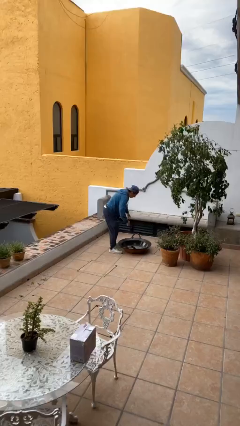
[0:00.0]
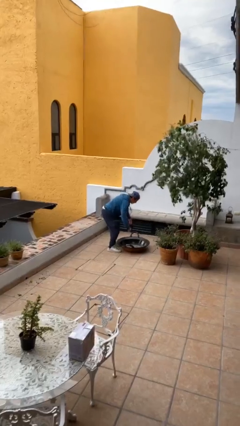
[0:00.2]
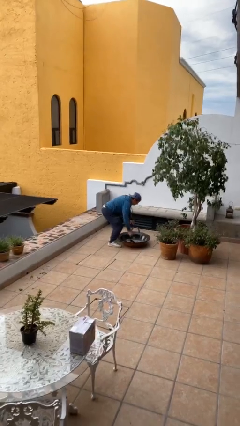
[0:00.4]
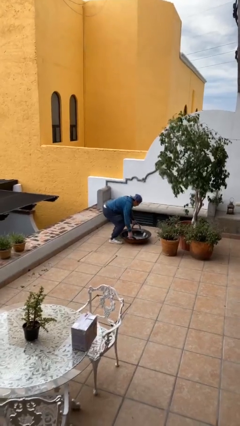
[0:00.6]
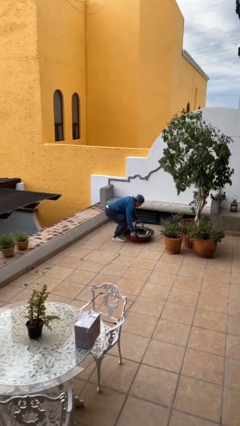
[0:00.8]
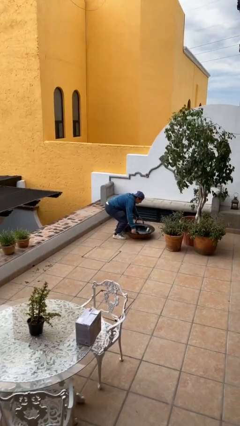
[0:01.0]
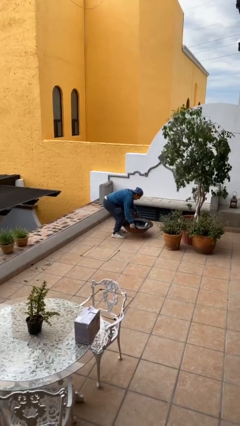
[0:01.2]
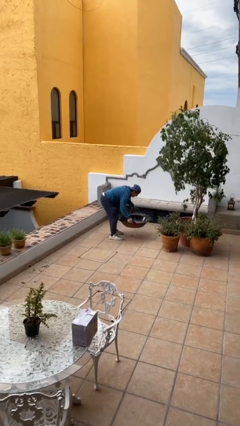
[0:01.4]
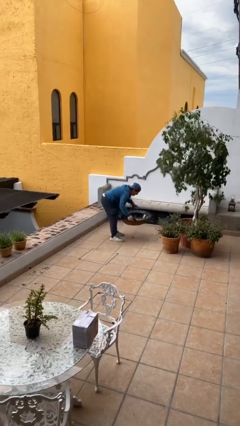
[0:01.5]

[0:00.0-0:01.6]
person picks up object from floor

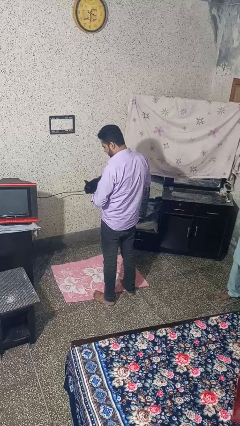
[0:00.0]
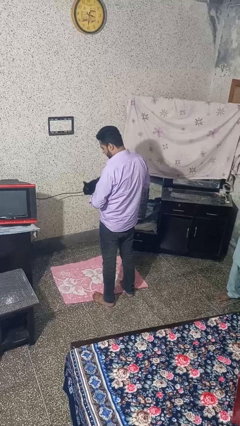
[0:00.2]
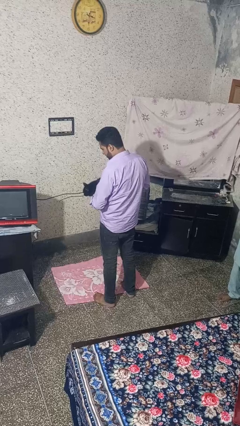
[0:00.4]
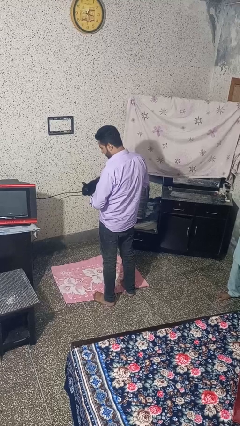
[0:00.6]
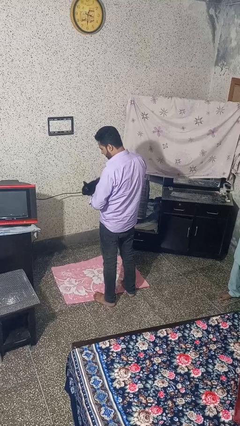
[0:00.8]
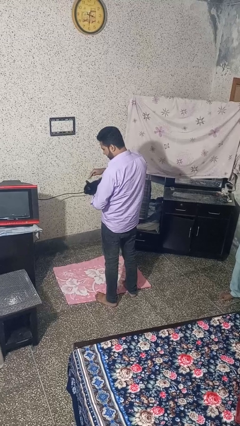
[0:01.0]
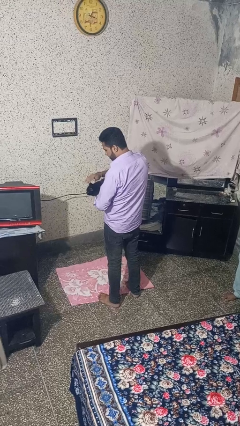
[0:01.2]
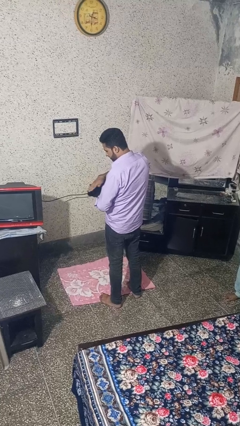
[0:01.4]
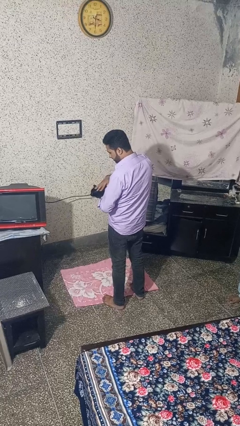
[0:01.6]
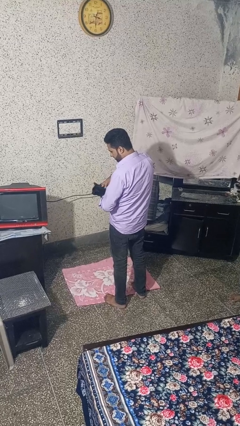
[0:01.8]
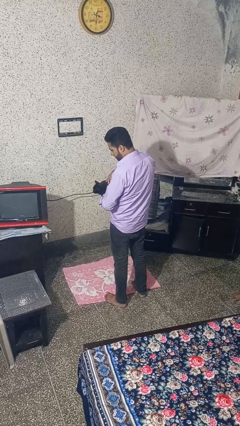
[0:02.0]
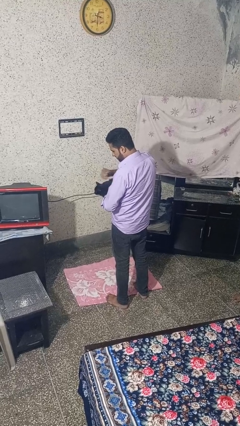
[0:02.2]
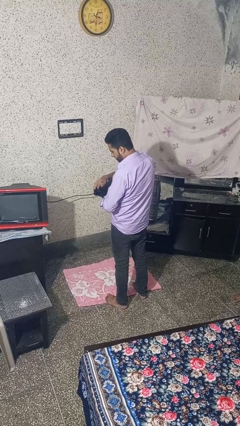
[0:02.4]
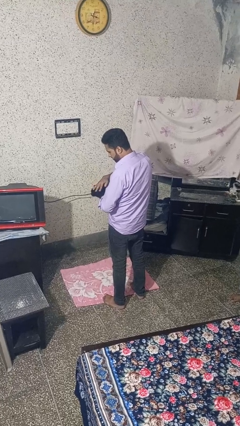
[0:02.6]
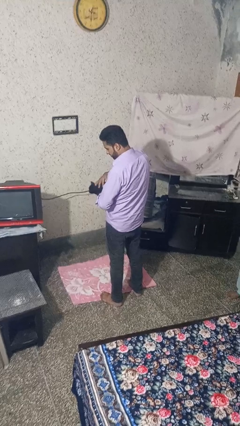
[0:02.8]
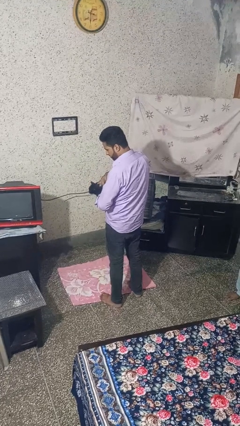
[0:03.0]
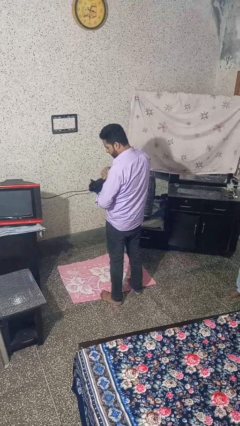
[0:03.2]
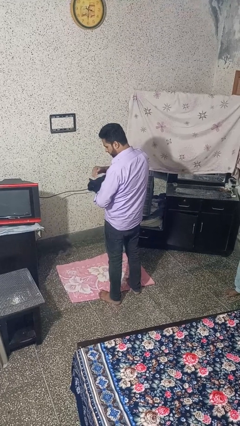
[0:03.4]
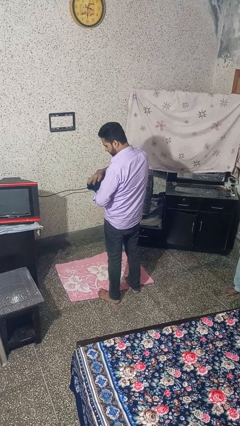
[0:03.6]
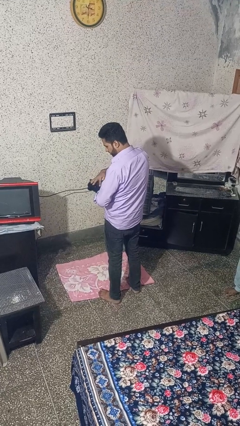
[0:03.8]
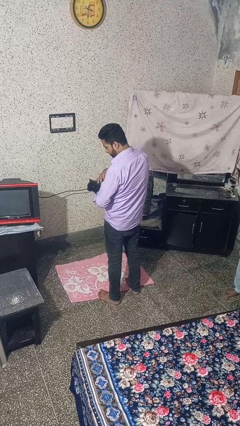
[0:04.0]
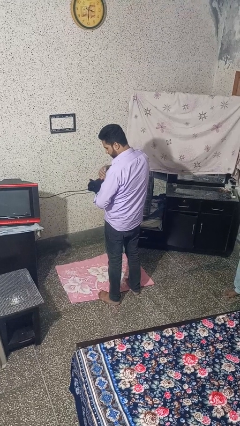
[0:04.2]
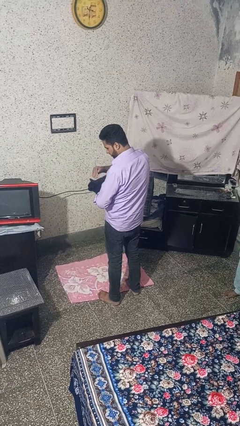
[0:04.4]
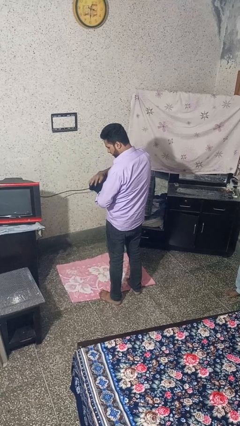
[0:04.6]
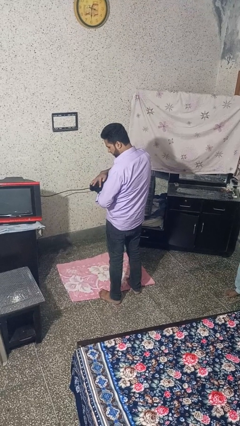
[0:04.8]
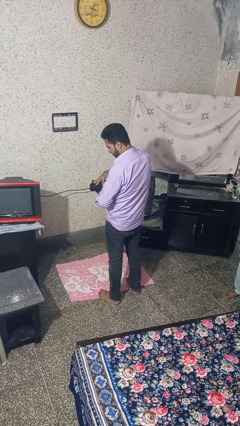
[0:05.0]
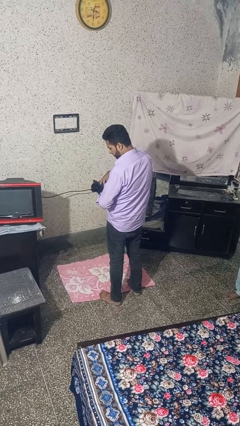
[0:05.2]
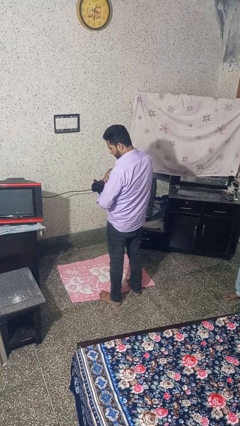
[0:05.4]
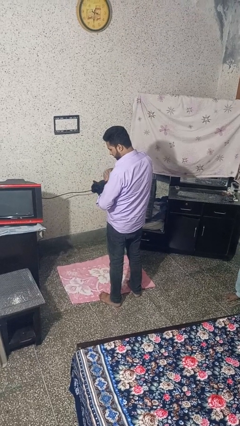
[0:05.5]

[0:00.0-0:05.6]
person pets cat

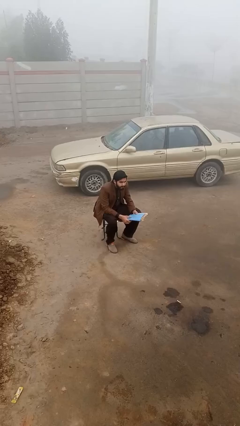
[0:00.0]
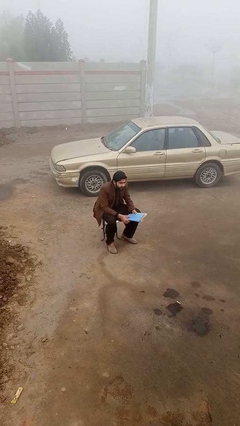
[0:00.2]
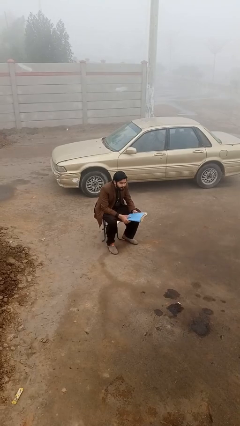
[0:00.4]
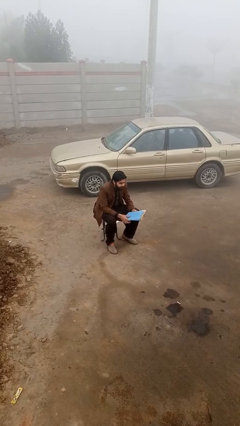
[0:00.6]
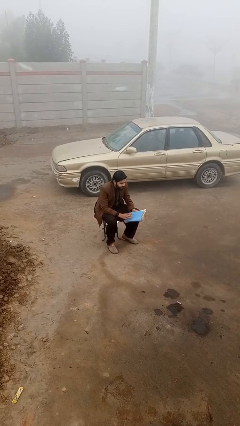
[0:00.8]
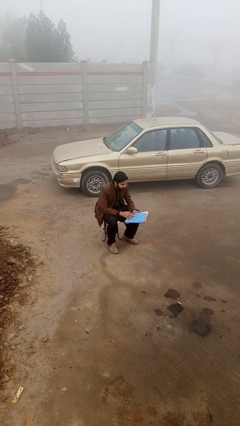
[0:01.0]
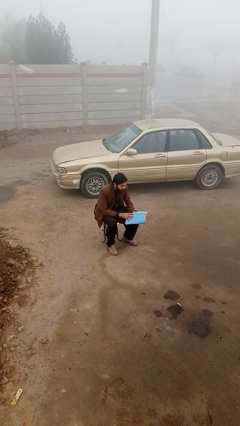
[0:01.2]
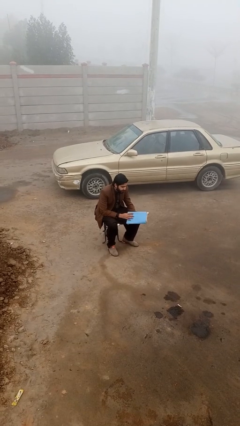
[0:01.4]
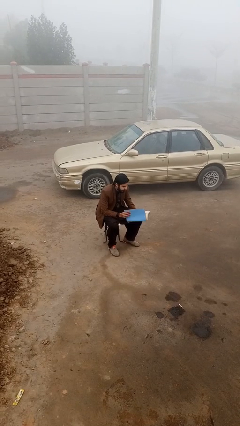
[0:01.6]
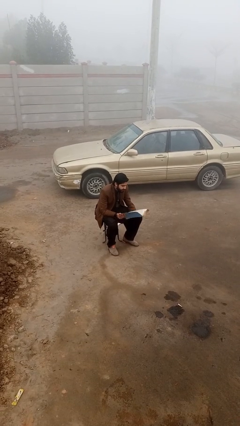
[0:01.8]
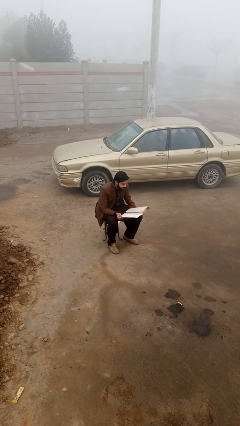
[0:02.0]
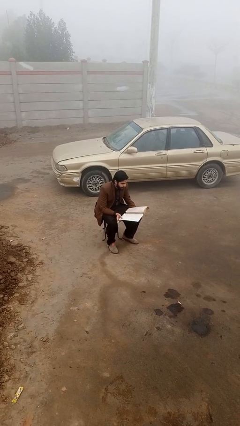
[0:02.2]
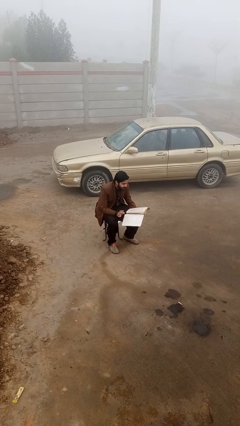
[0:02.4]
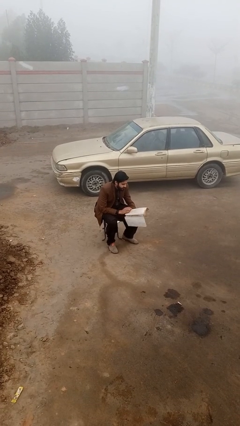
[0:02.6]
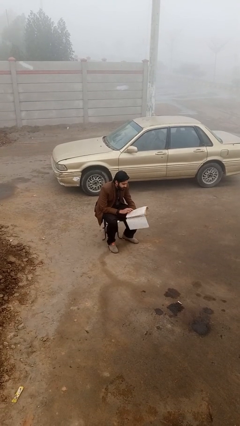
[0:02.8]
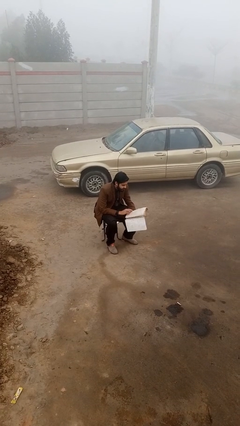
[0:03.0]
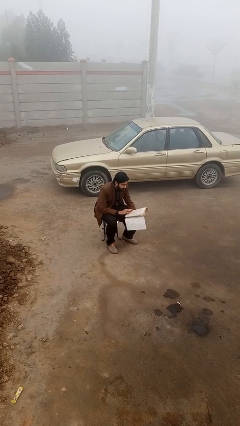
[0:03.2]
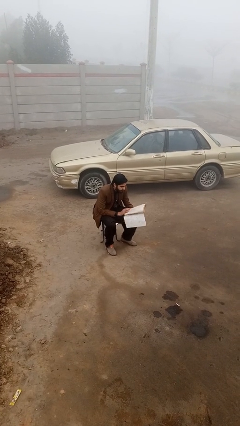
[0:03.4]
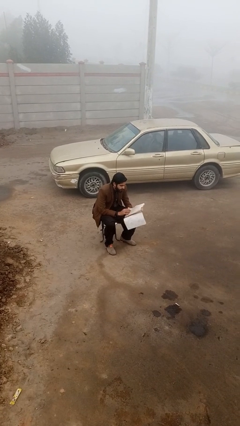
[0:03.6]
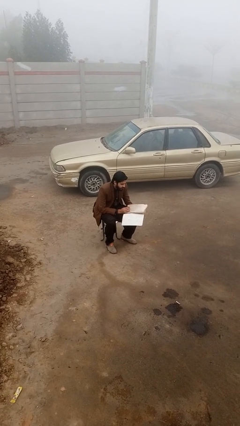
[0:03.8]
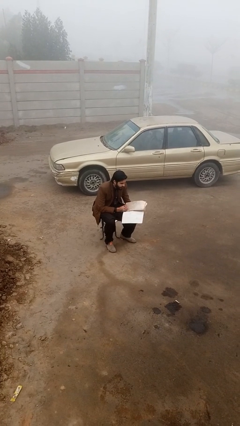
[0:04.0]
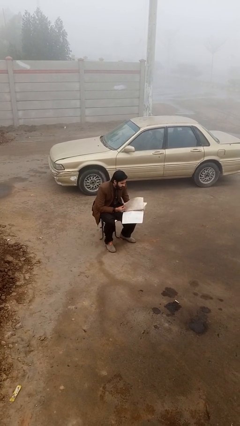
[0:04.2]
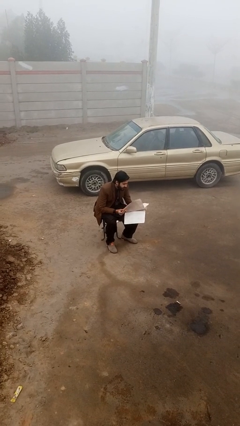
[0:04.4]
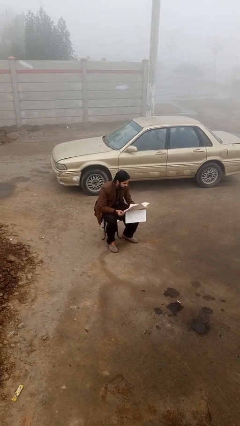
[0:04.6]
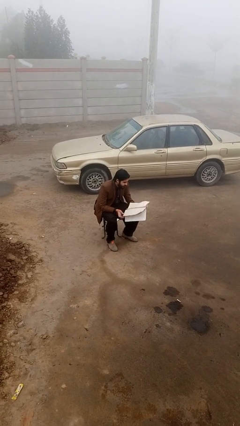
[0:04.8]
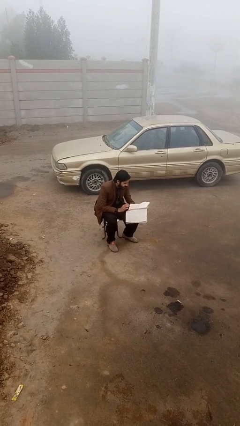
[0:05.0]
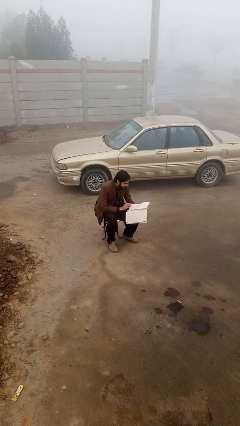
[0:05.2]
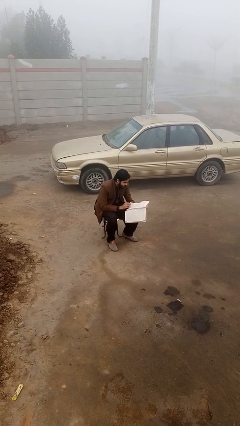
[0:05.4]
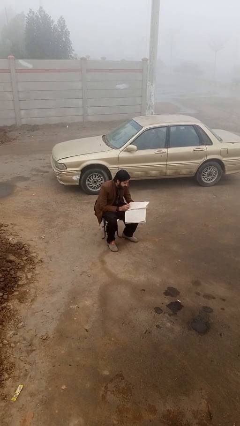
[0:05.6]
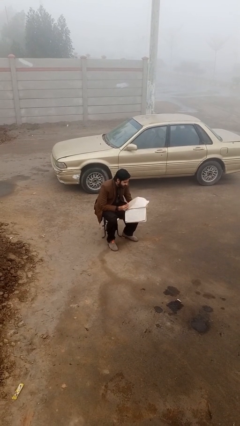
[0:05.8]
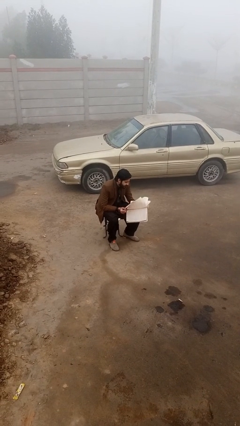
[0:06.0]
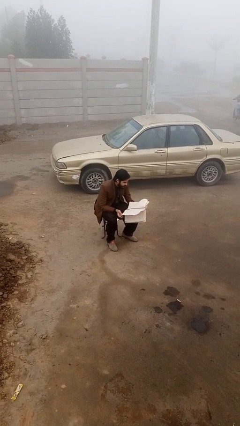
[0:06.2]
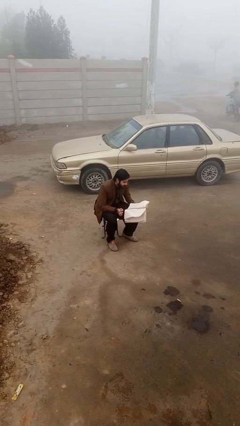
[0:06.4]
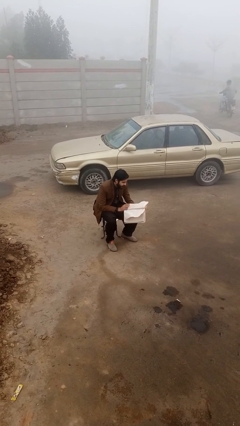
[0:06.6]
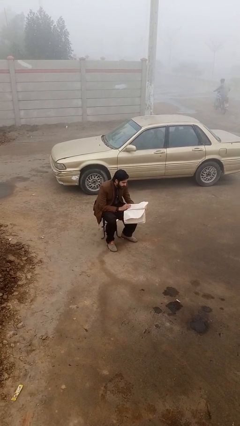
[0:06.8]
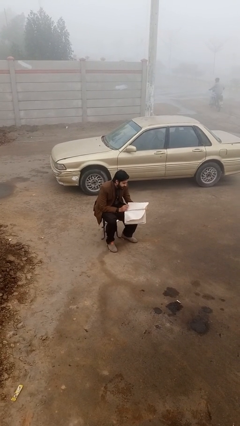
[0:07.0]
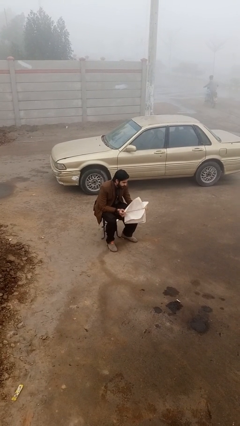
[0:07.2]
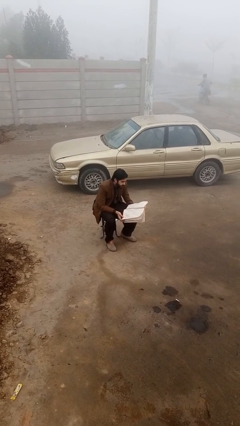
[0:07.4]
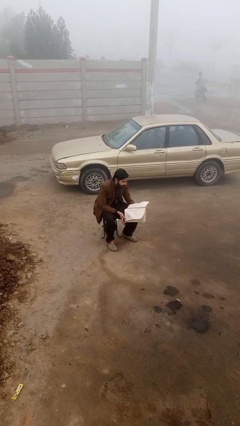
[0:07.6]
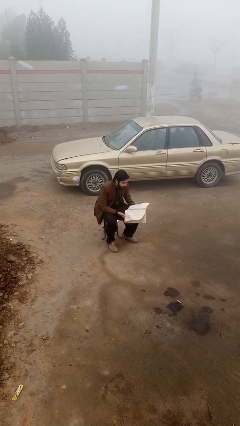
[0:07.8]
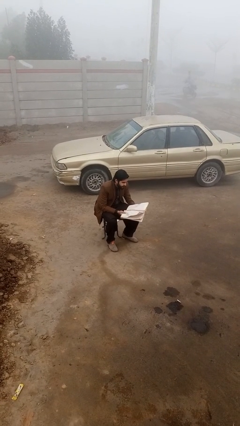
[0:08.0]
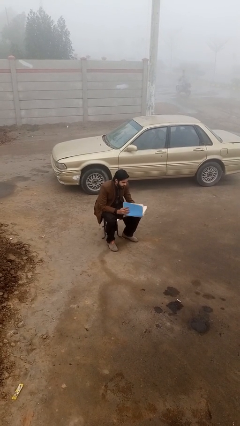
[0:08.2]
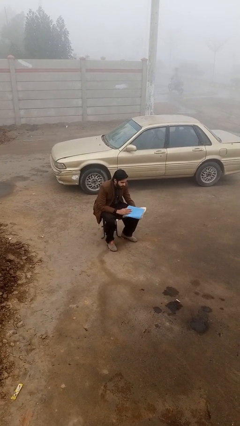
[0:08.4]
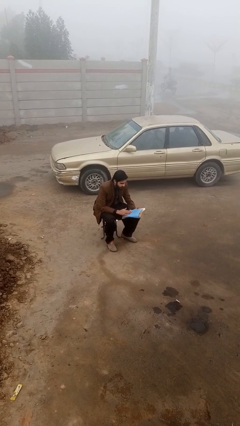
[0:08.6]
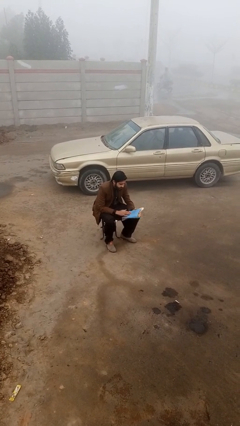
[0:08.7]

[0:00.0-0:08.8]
person reads document

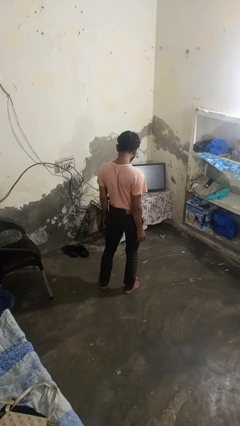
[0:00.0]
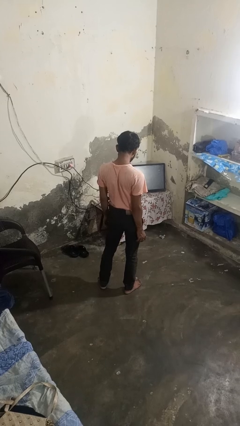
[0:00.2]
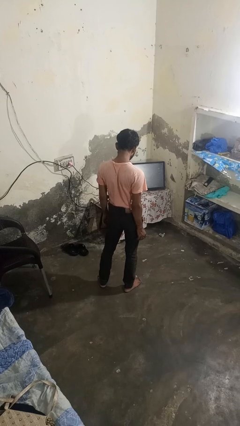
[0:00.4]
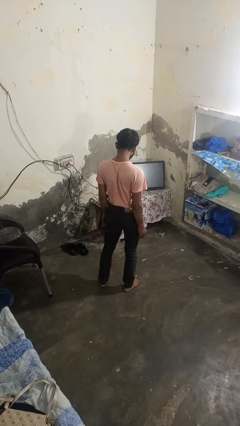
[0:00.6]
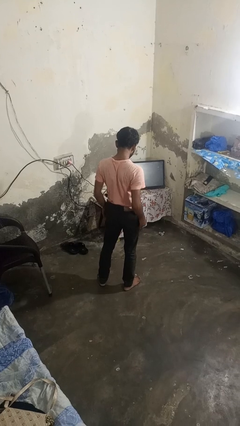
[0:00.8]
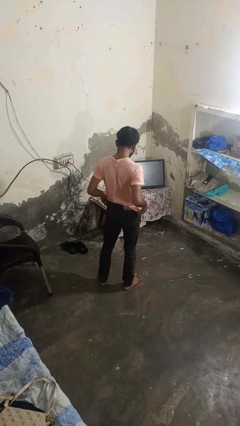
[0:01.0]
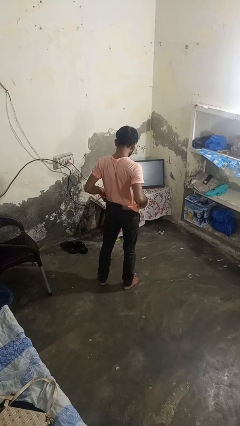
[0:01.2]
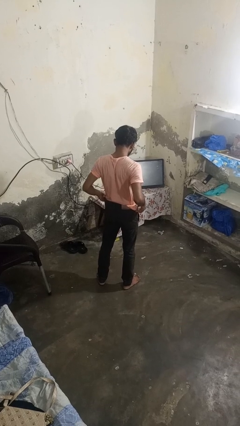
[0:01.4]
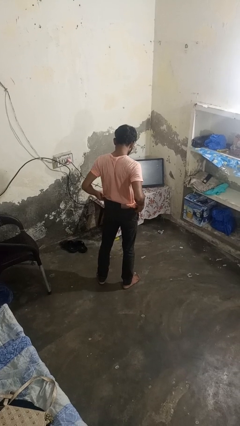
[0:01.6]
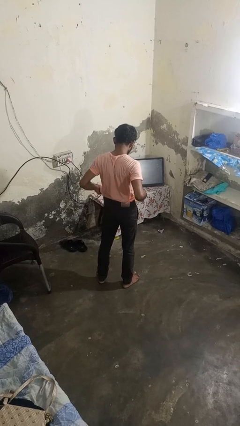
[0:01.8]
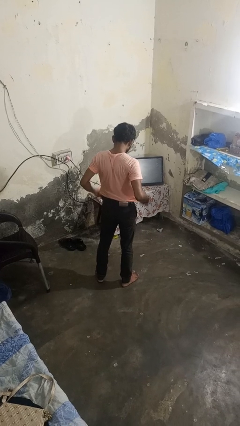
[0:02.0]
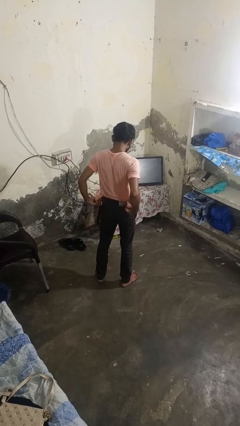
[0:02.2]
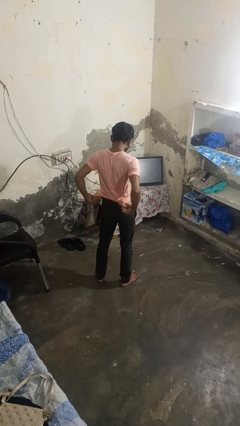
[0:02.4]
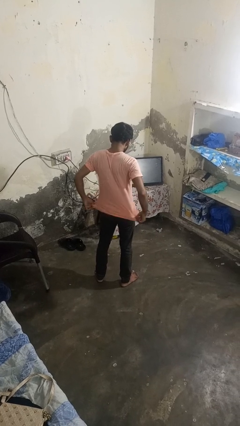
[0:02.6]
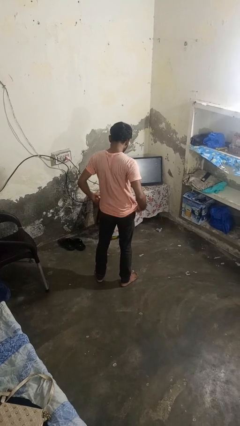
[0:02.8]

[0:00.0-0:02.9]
person untucks shirt
